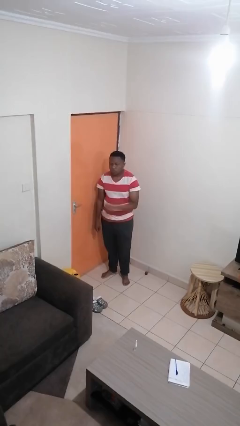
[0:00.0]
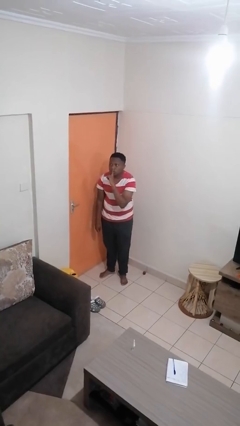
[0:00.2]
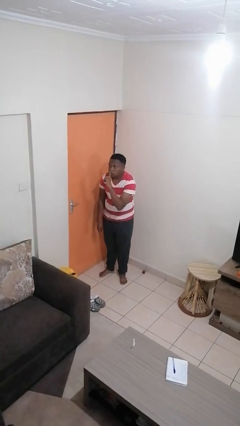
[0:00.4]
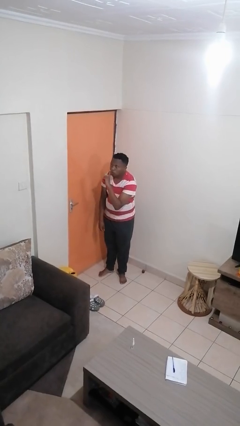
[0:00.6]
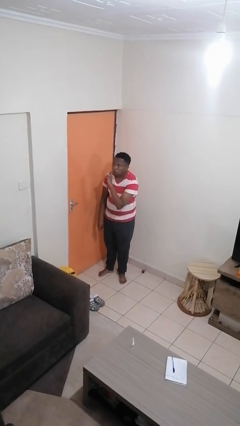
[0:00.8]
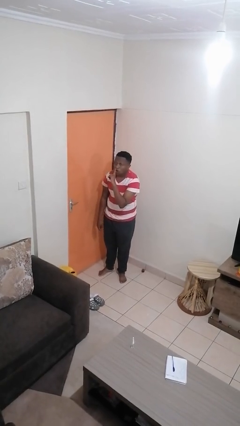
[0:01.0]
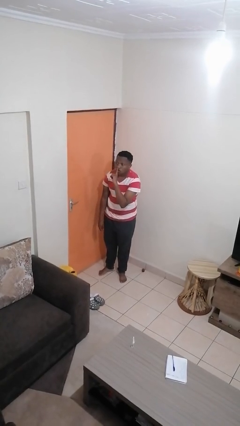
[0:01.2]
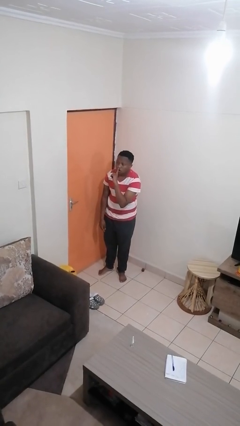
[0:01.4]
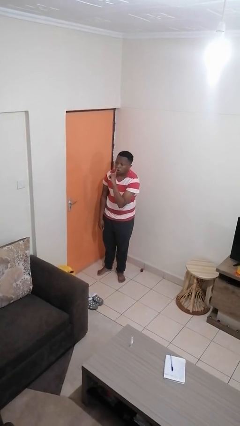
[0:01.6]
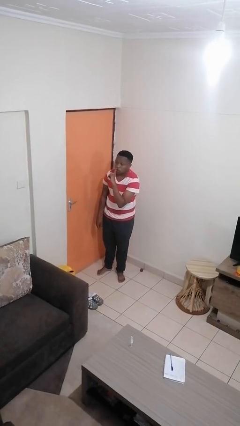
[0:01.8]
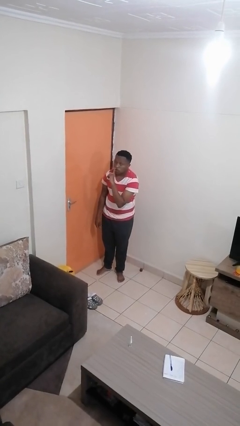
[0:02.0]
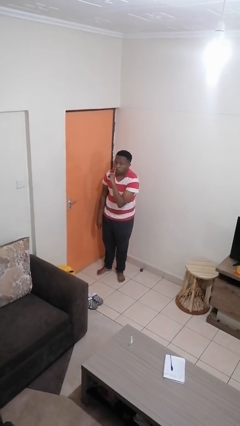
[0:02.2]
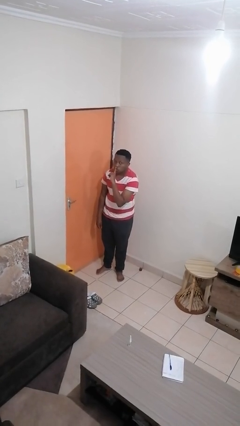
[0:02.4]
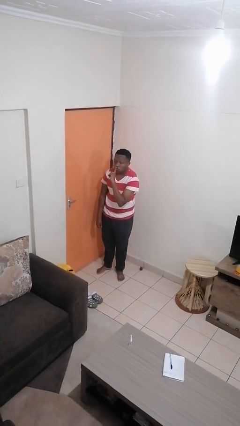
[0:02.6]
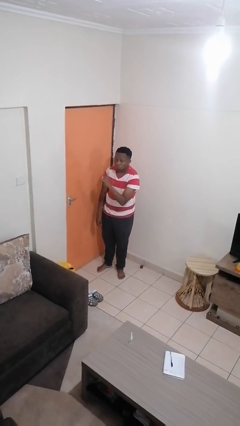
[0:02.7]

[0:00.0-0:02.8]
person gestures be quiet

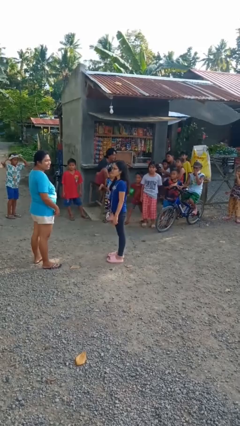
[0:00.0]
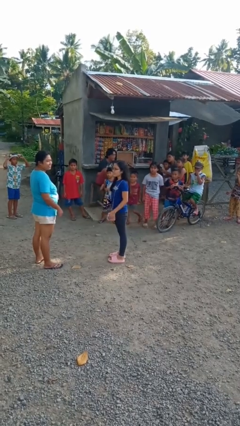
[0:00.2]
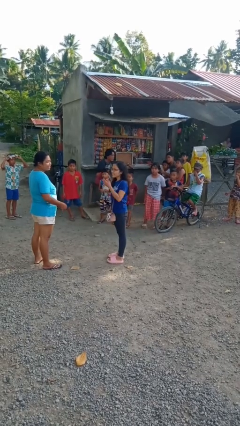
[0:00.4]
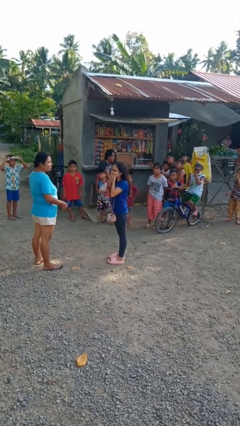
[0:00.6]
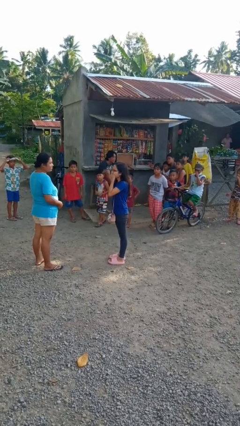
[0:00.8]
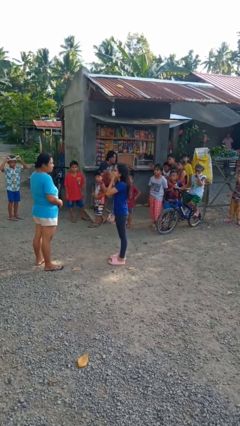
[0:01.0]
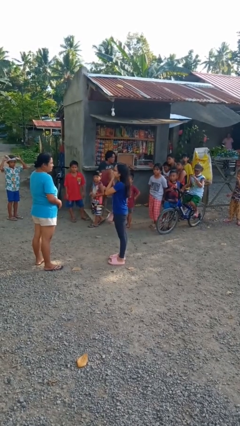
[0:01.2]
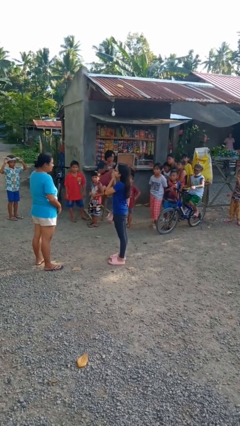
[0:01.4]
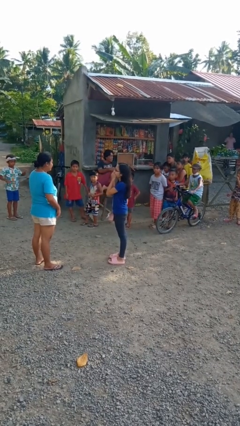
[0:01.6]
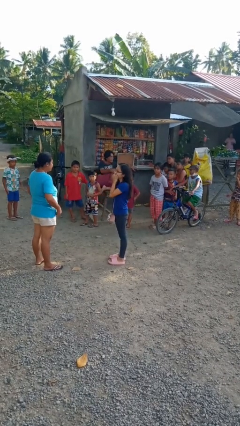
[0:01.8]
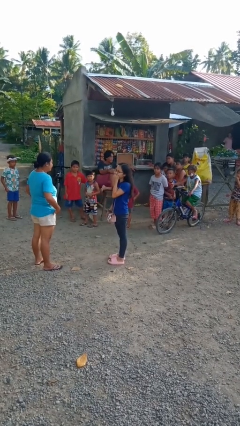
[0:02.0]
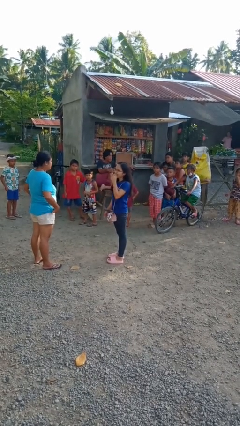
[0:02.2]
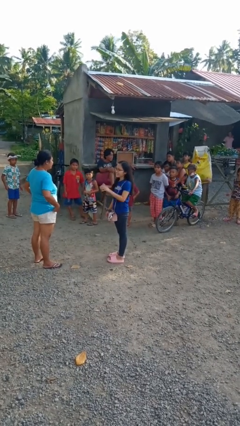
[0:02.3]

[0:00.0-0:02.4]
person laughs with person

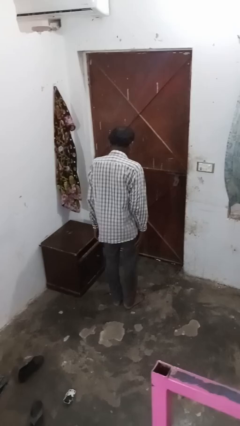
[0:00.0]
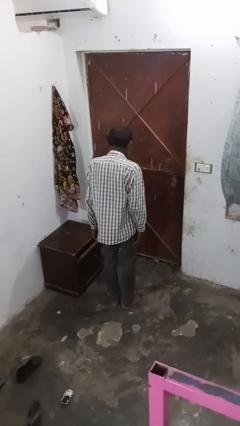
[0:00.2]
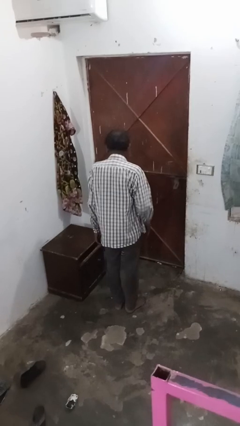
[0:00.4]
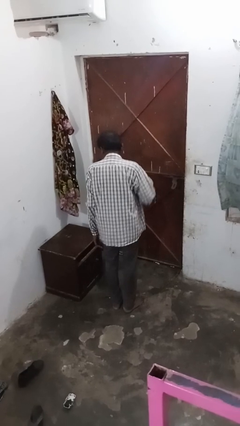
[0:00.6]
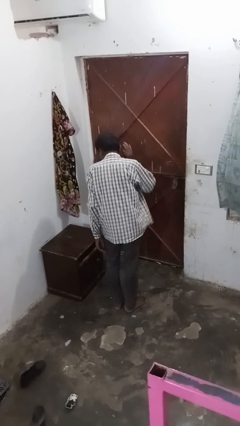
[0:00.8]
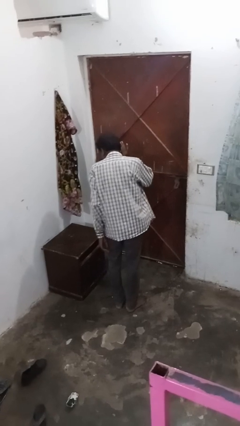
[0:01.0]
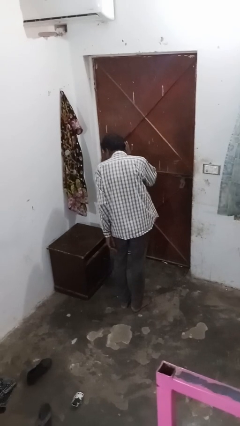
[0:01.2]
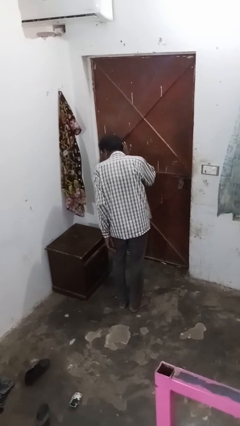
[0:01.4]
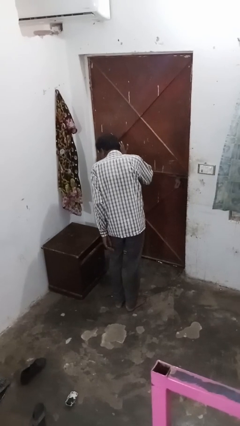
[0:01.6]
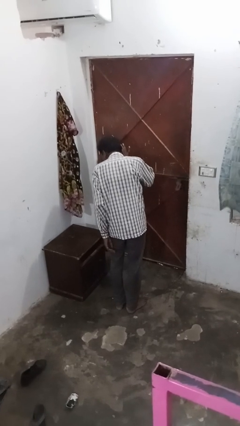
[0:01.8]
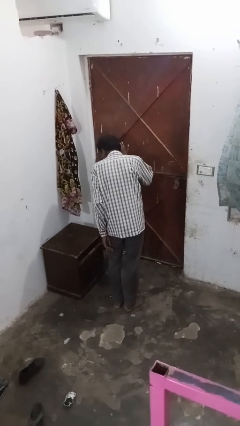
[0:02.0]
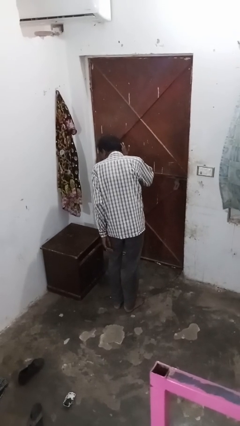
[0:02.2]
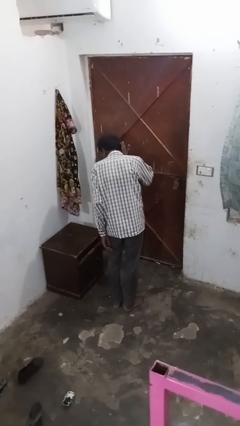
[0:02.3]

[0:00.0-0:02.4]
person gestures listen closely

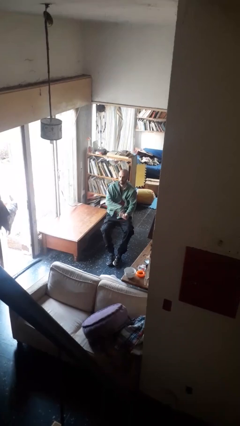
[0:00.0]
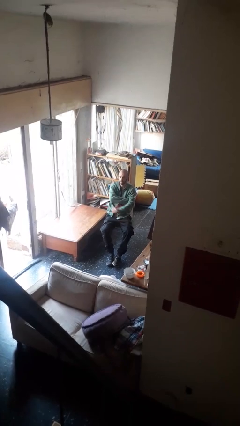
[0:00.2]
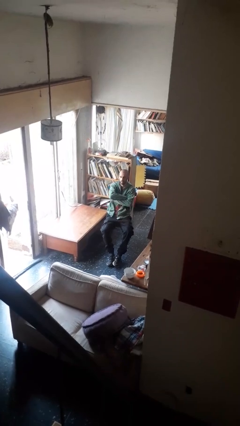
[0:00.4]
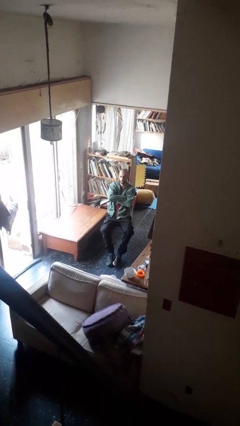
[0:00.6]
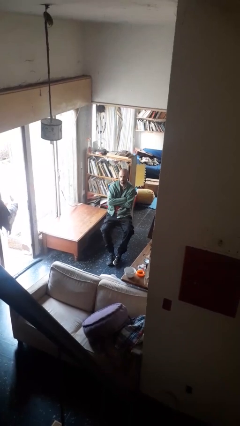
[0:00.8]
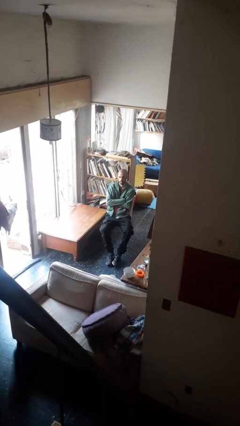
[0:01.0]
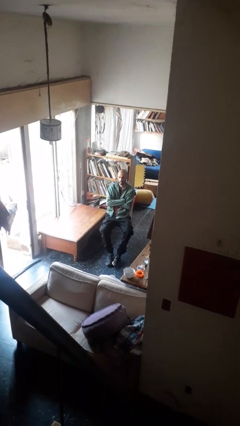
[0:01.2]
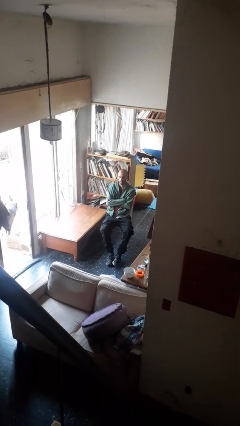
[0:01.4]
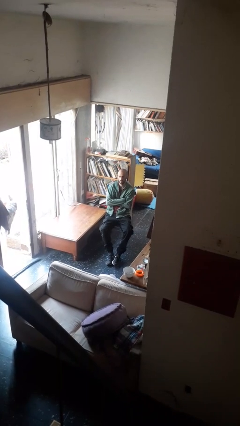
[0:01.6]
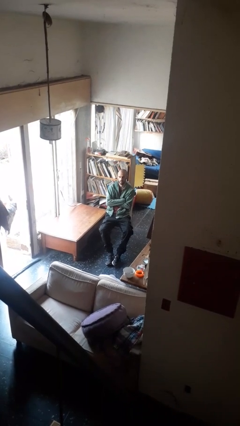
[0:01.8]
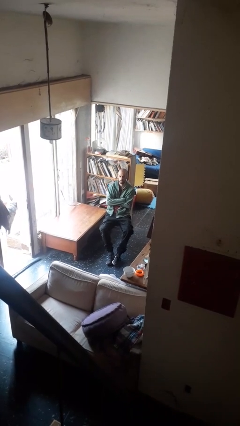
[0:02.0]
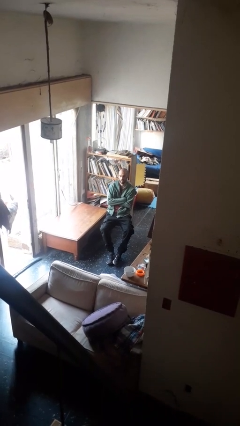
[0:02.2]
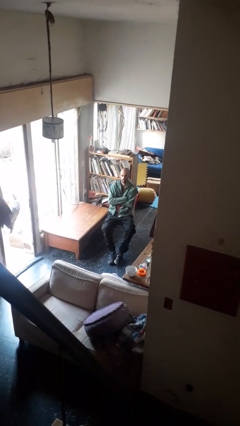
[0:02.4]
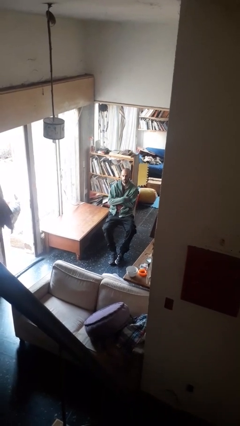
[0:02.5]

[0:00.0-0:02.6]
person crosses arms

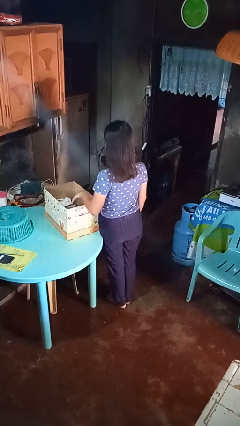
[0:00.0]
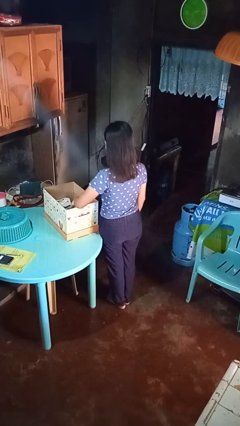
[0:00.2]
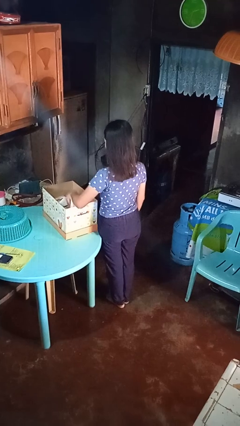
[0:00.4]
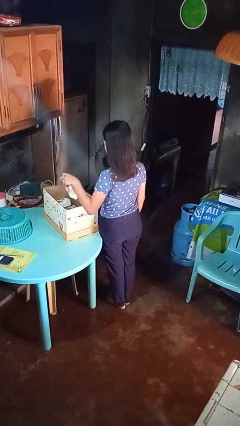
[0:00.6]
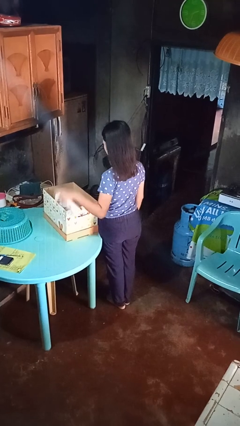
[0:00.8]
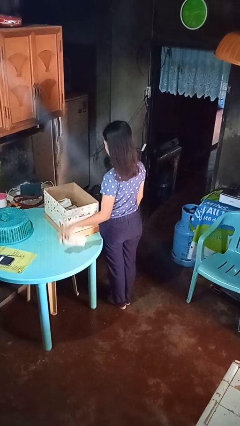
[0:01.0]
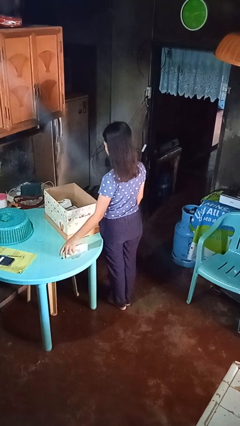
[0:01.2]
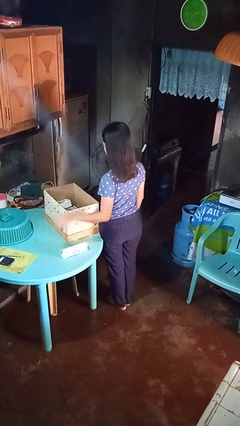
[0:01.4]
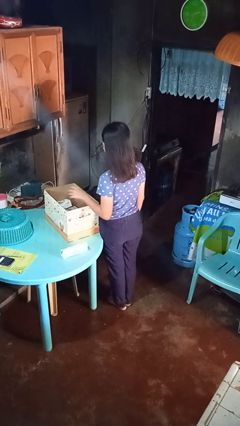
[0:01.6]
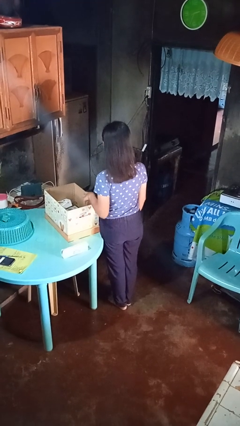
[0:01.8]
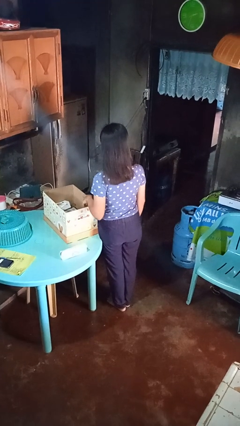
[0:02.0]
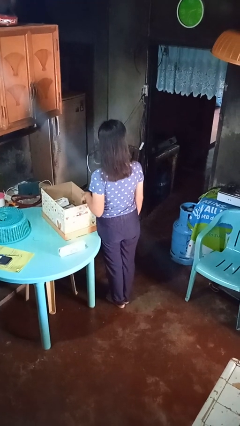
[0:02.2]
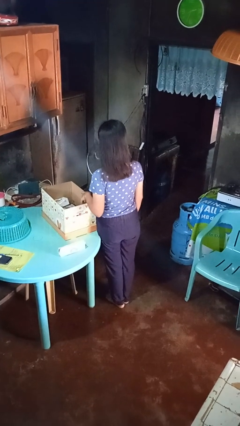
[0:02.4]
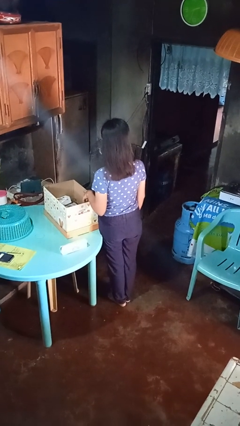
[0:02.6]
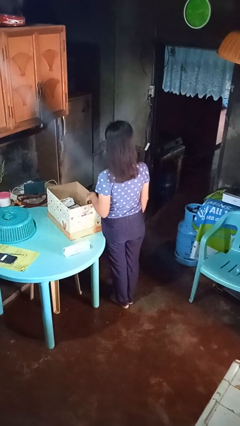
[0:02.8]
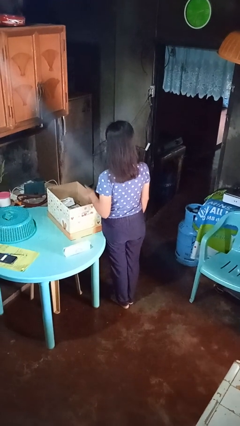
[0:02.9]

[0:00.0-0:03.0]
person takes object from box

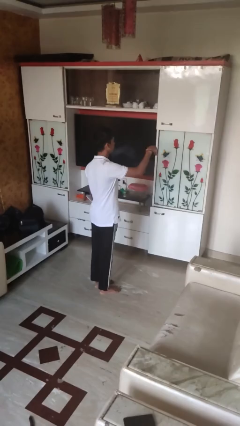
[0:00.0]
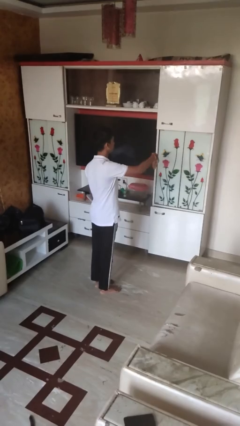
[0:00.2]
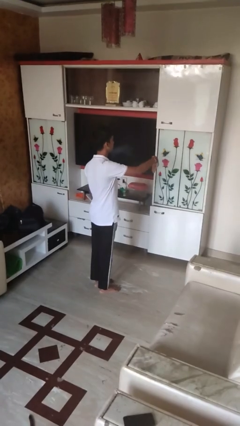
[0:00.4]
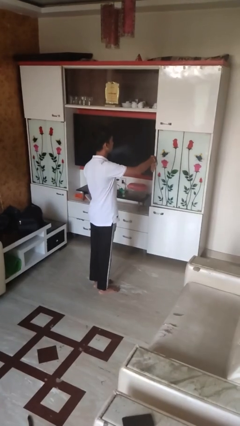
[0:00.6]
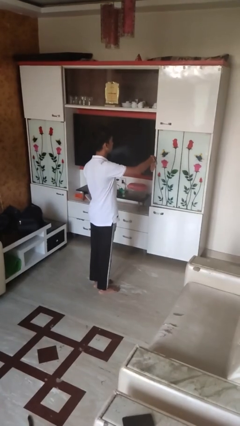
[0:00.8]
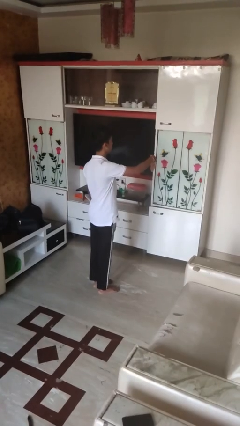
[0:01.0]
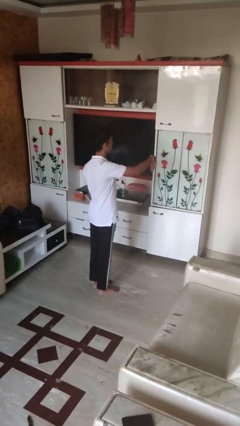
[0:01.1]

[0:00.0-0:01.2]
person gestures swipe down

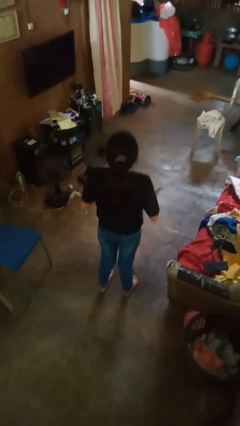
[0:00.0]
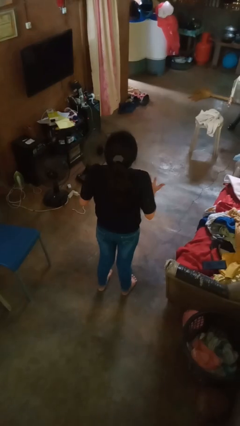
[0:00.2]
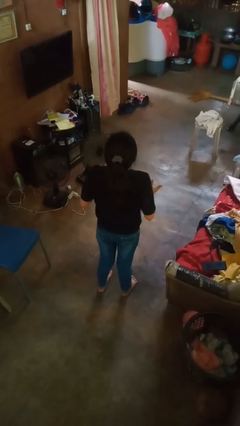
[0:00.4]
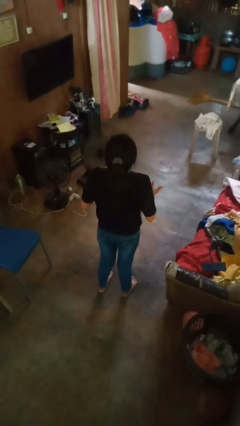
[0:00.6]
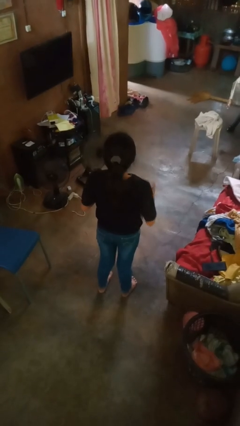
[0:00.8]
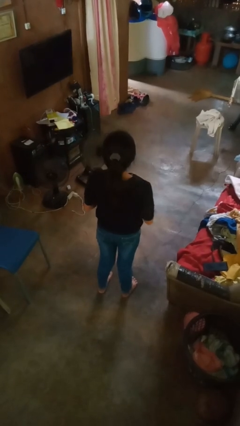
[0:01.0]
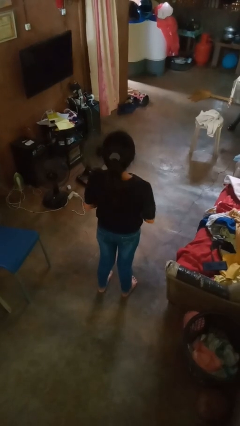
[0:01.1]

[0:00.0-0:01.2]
person shrugs

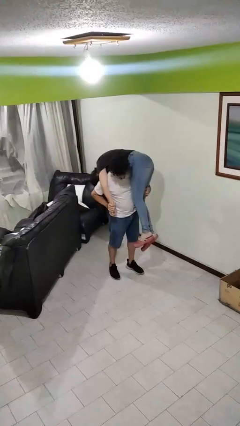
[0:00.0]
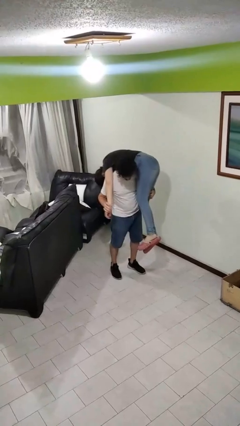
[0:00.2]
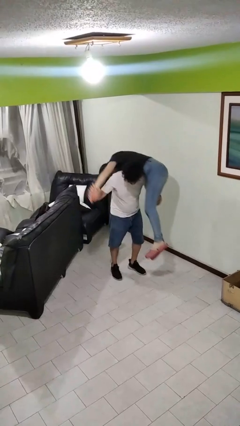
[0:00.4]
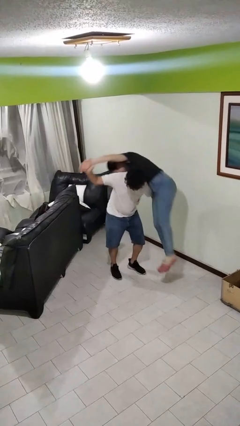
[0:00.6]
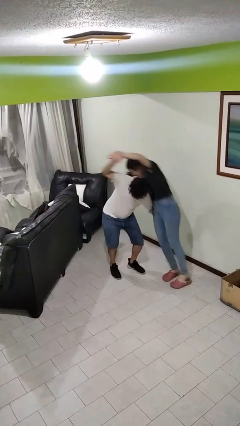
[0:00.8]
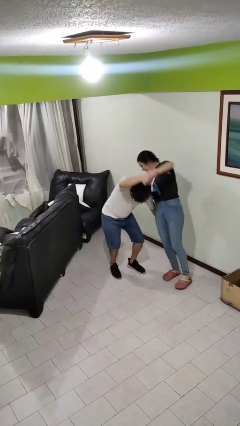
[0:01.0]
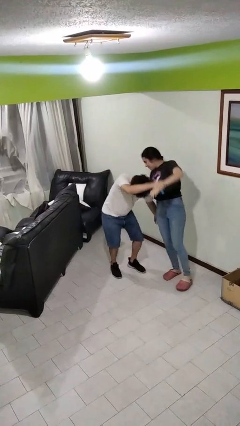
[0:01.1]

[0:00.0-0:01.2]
person puts down person
